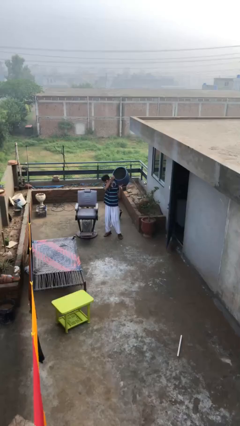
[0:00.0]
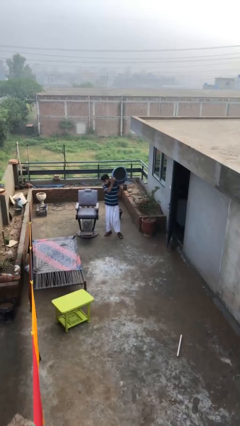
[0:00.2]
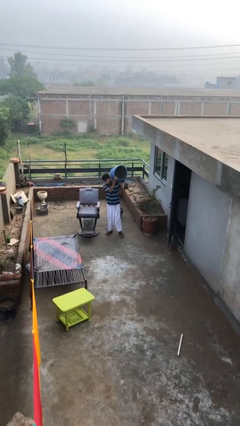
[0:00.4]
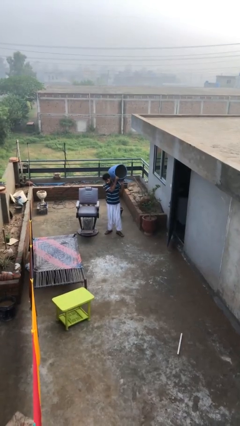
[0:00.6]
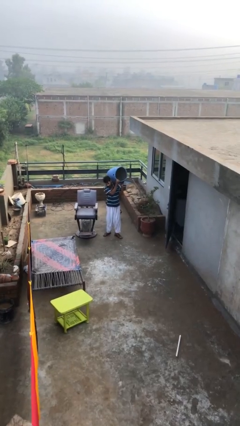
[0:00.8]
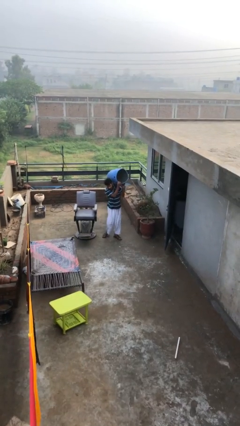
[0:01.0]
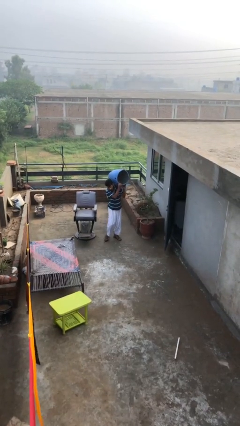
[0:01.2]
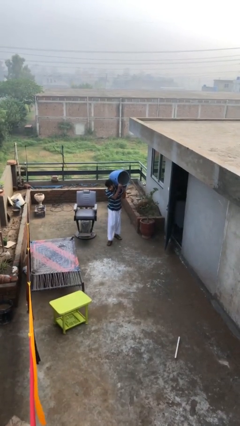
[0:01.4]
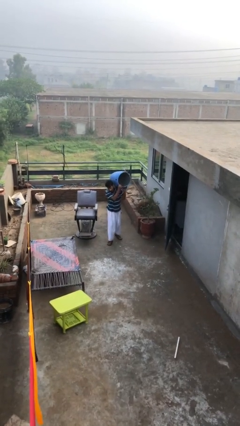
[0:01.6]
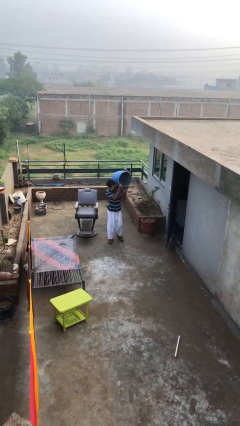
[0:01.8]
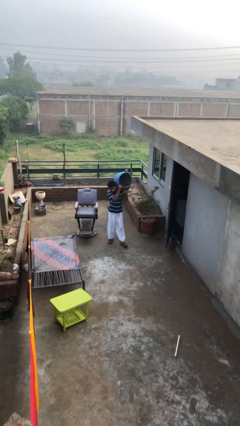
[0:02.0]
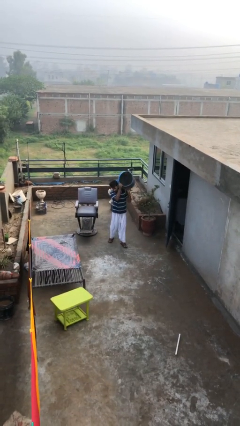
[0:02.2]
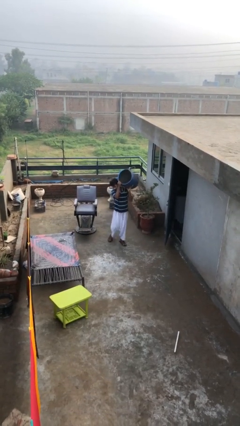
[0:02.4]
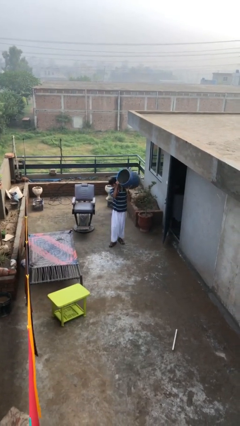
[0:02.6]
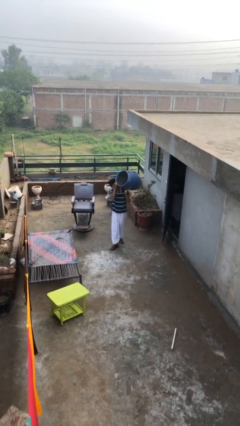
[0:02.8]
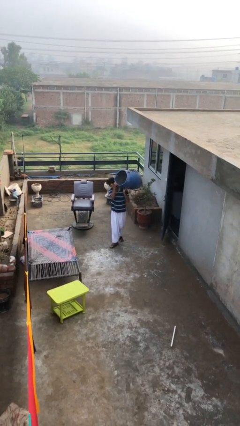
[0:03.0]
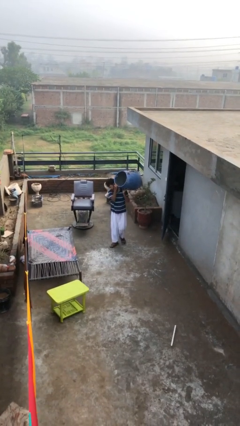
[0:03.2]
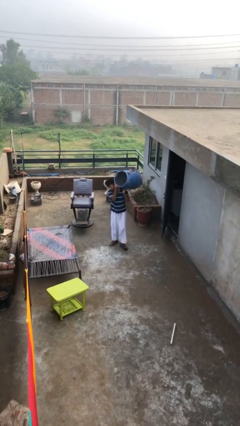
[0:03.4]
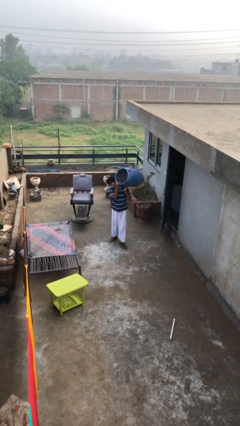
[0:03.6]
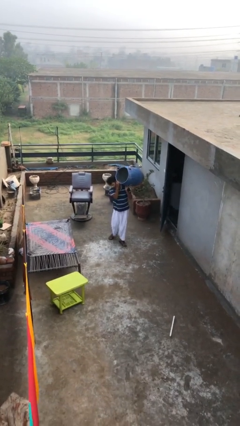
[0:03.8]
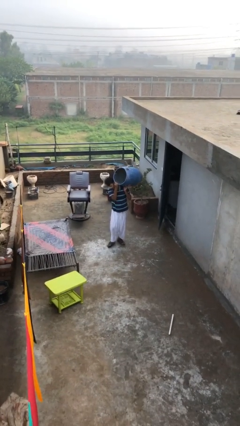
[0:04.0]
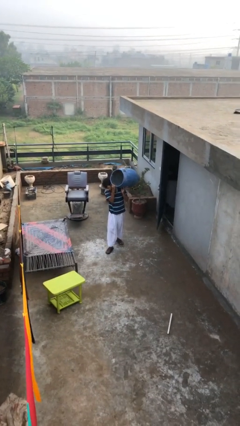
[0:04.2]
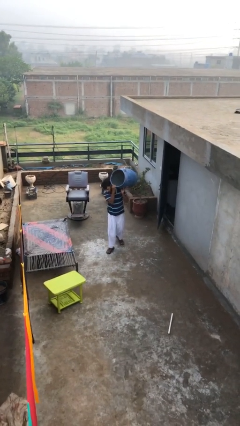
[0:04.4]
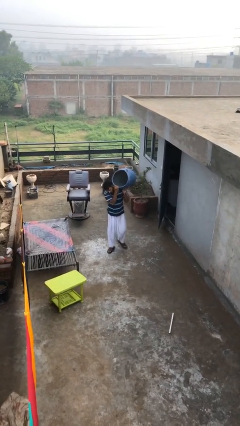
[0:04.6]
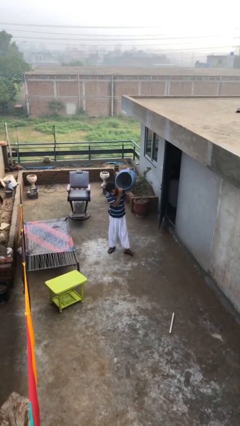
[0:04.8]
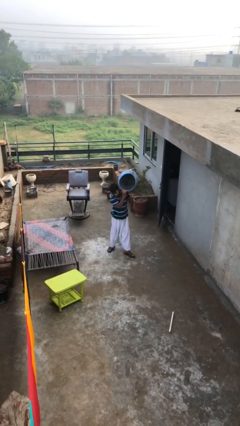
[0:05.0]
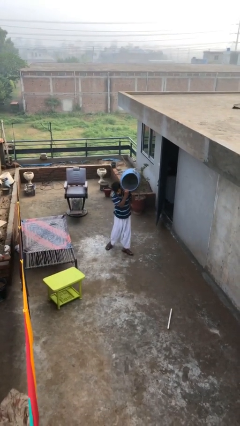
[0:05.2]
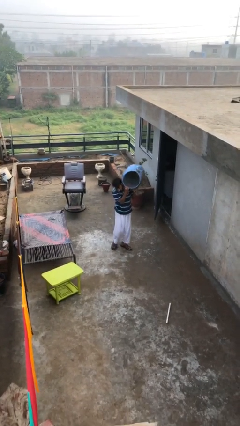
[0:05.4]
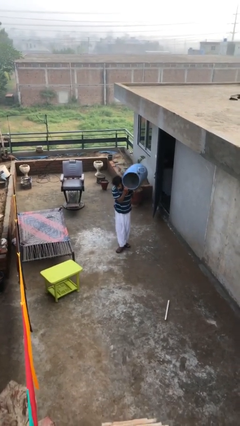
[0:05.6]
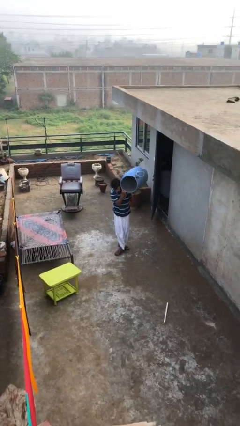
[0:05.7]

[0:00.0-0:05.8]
person carries heavy object

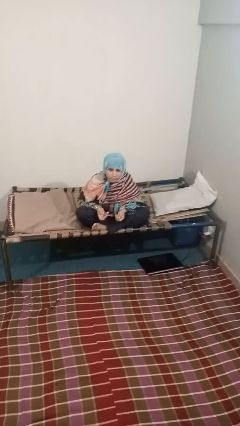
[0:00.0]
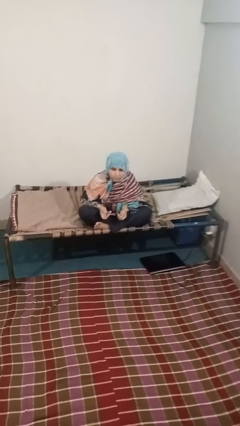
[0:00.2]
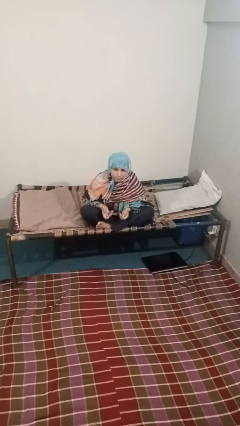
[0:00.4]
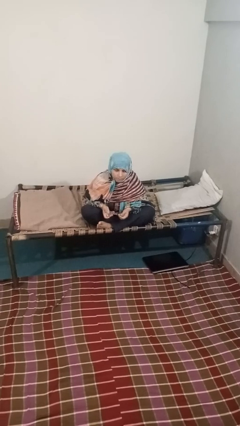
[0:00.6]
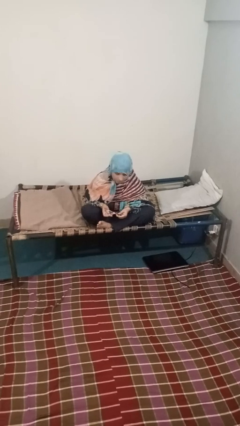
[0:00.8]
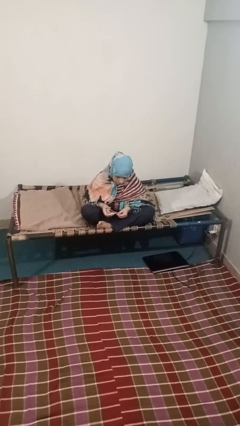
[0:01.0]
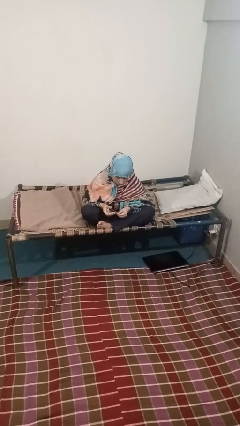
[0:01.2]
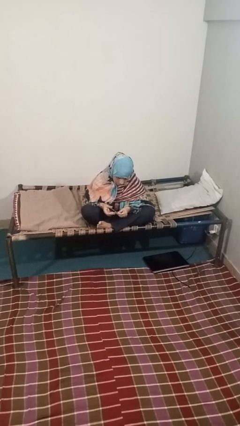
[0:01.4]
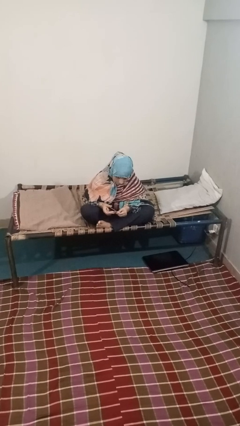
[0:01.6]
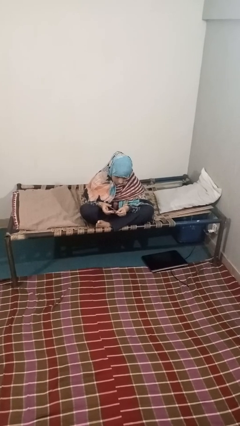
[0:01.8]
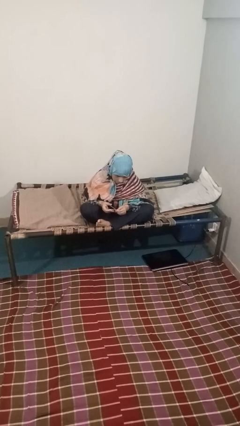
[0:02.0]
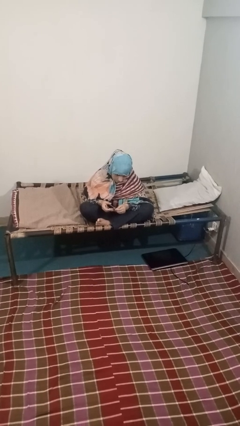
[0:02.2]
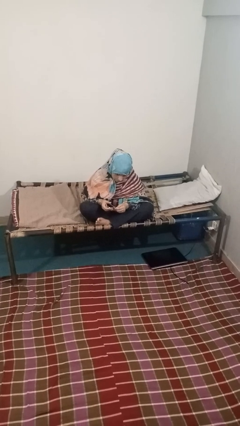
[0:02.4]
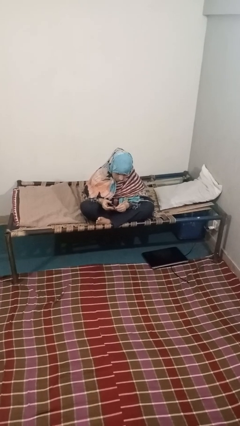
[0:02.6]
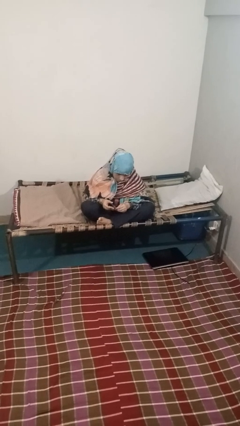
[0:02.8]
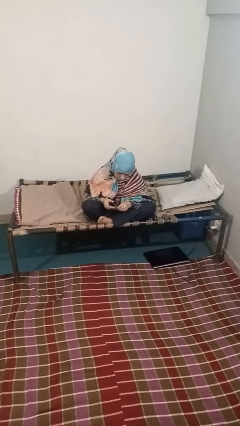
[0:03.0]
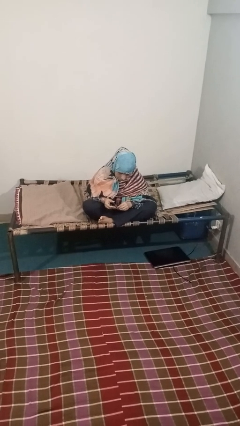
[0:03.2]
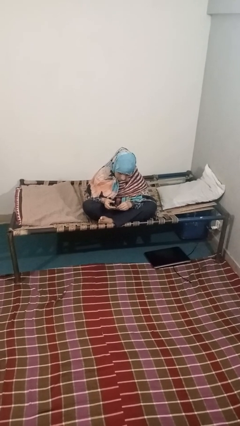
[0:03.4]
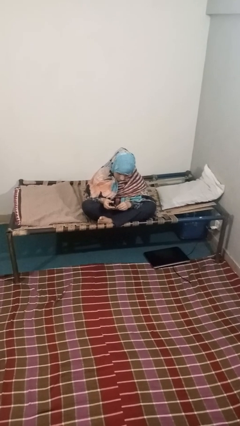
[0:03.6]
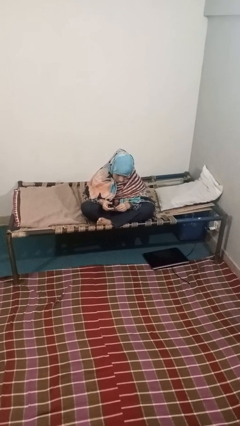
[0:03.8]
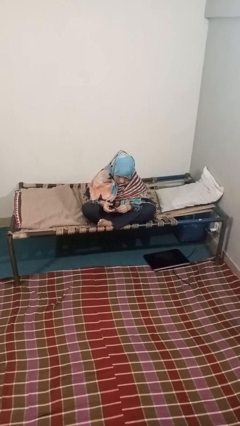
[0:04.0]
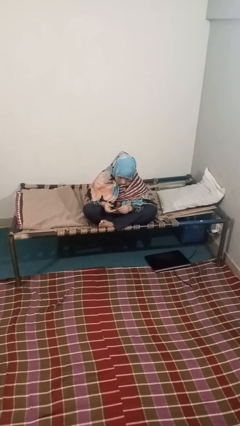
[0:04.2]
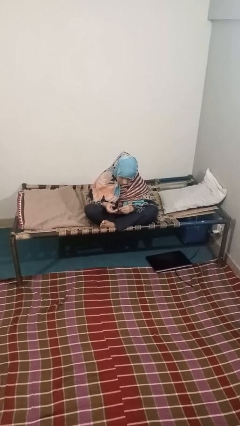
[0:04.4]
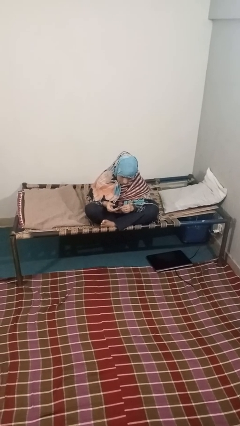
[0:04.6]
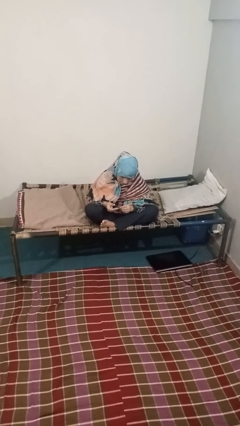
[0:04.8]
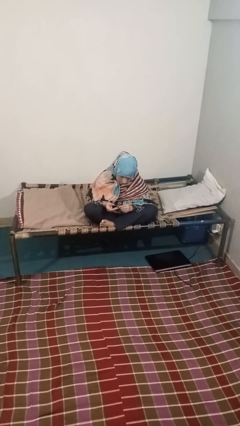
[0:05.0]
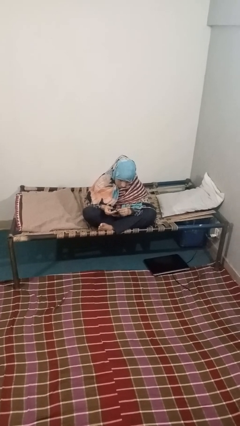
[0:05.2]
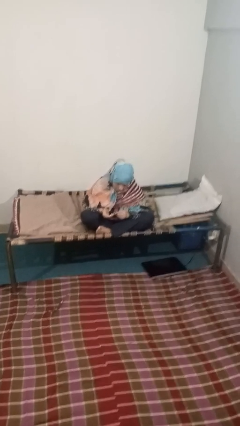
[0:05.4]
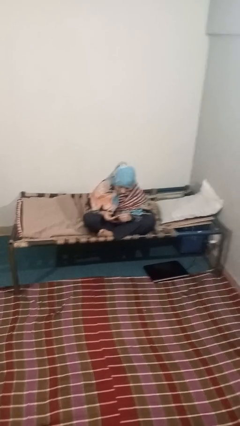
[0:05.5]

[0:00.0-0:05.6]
person clips fingernails

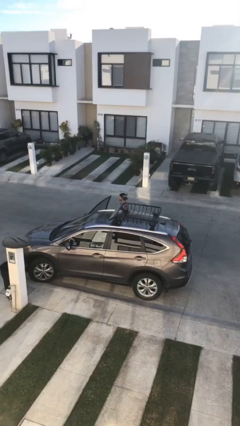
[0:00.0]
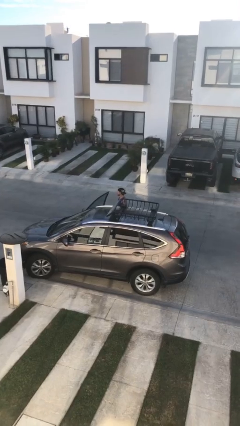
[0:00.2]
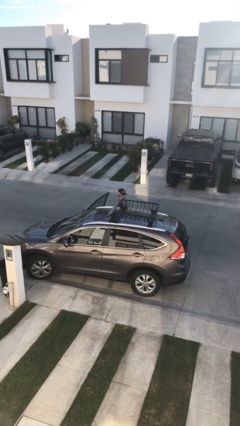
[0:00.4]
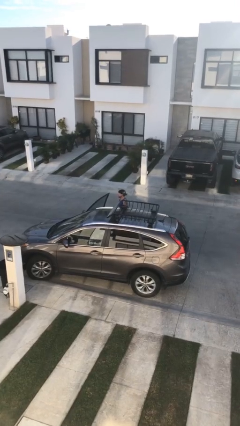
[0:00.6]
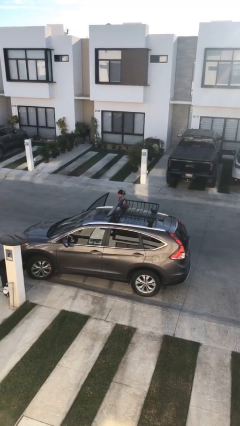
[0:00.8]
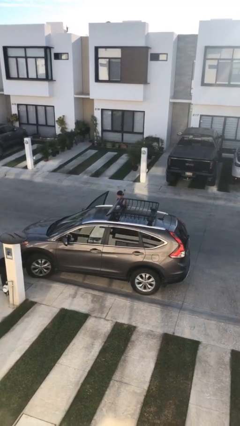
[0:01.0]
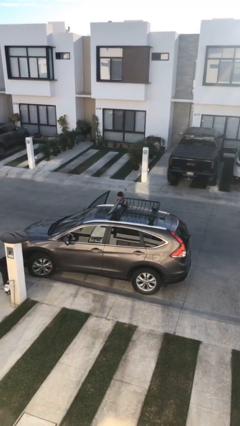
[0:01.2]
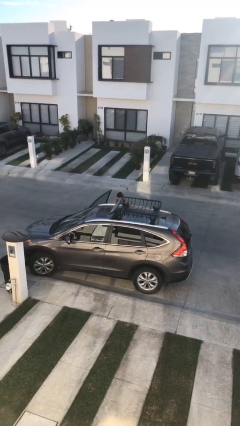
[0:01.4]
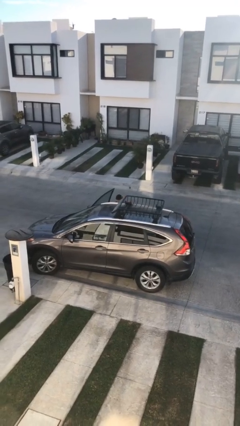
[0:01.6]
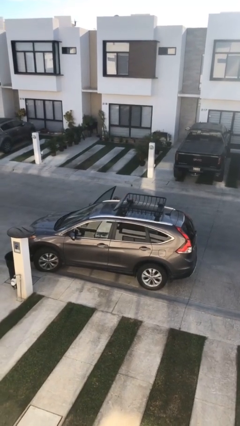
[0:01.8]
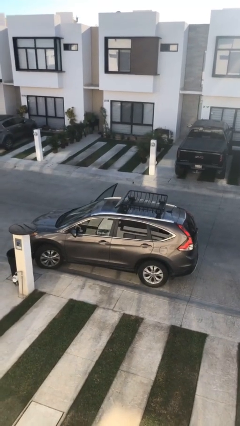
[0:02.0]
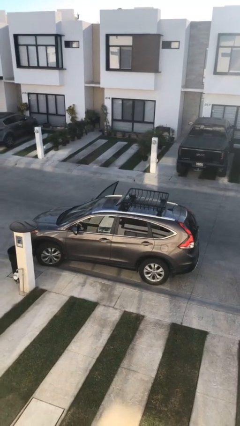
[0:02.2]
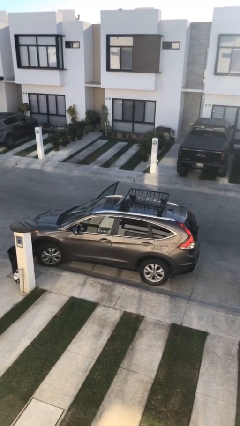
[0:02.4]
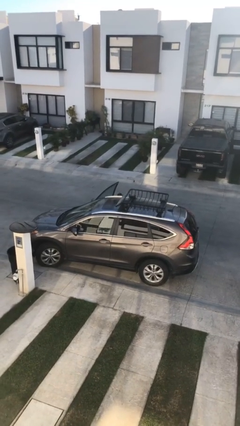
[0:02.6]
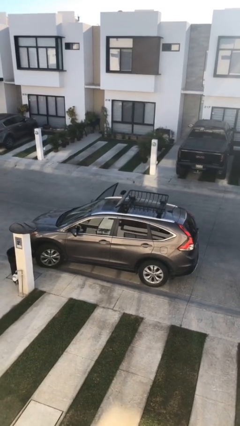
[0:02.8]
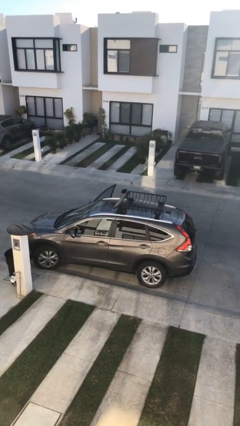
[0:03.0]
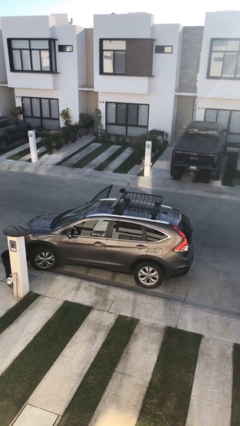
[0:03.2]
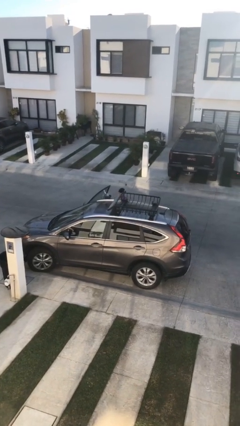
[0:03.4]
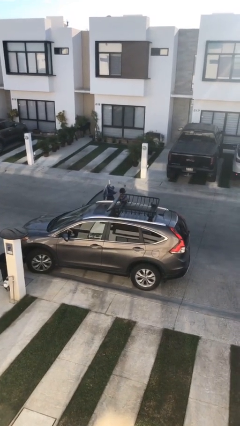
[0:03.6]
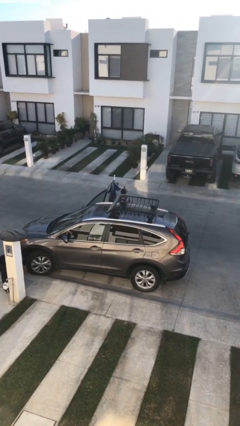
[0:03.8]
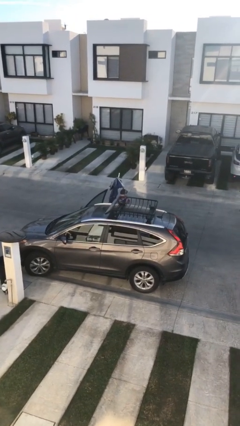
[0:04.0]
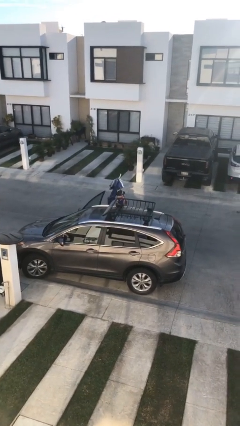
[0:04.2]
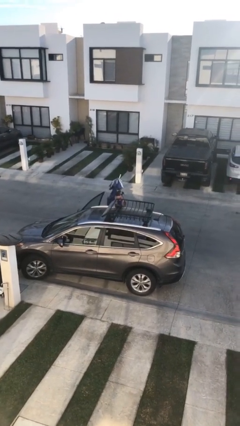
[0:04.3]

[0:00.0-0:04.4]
person unloads car

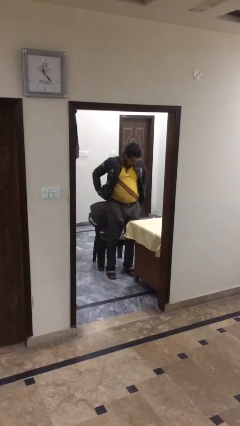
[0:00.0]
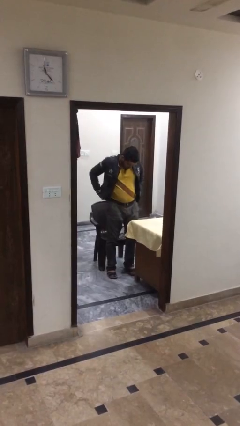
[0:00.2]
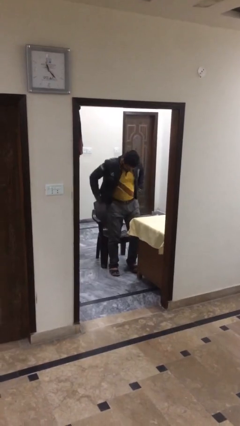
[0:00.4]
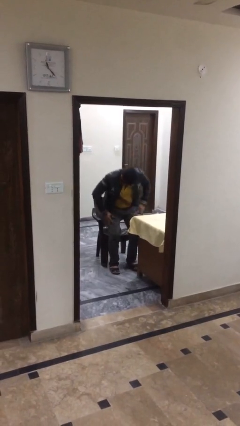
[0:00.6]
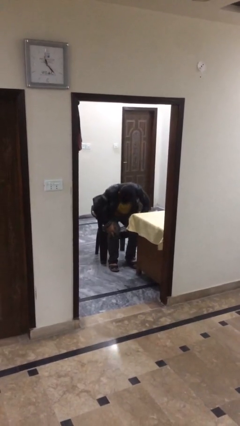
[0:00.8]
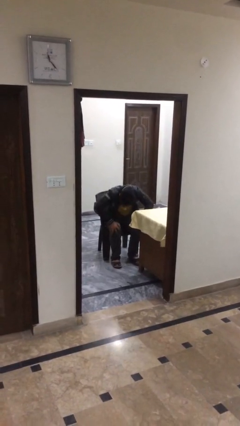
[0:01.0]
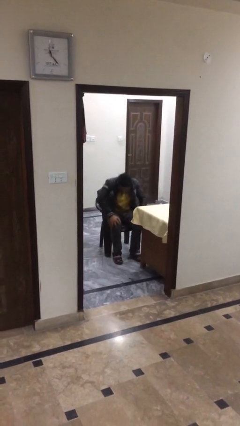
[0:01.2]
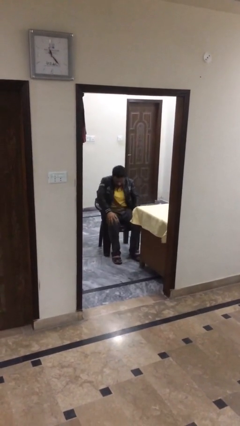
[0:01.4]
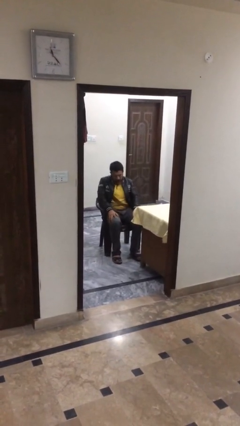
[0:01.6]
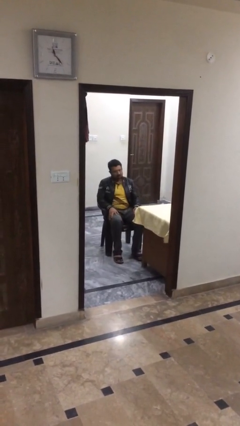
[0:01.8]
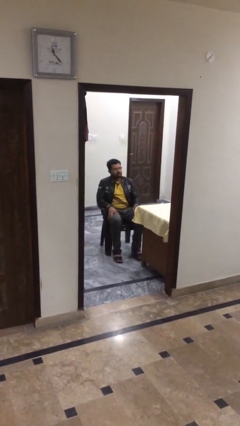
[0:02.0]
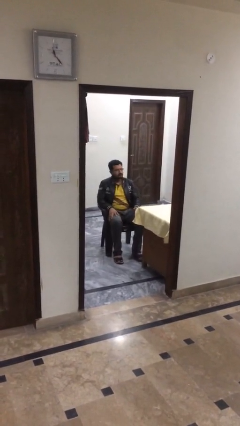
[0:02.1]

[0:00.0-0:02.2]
person sits down
